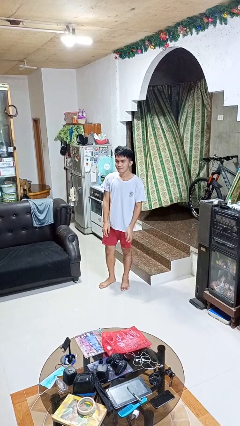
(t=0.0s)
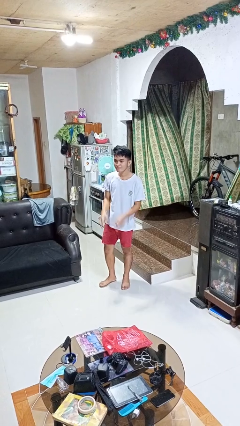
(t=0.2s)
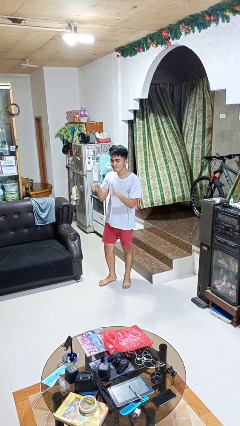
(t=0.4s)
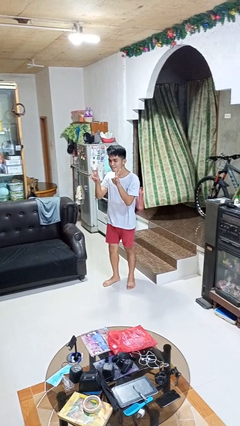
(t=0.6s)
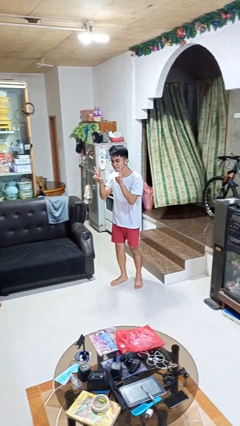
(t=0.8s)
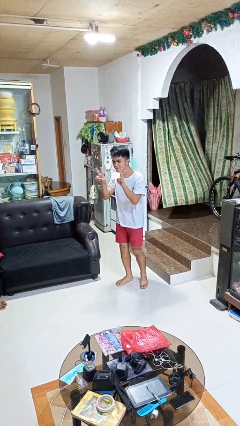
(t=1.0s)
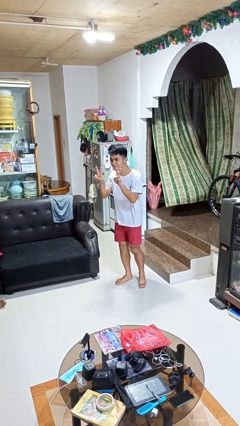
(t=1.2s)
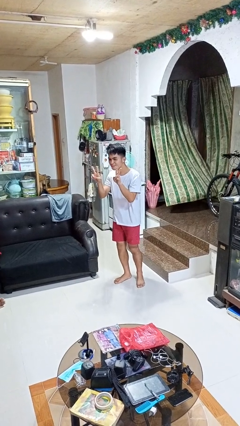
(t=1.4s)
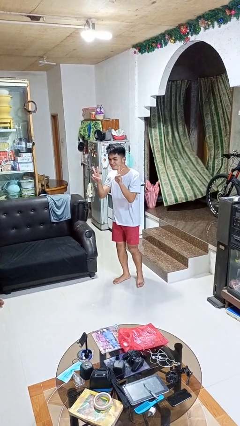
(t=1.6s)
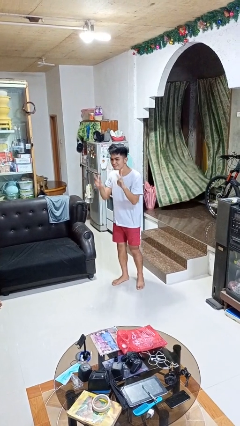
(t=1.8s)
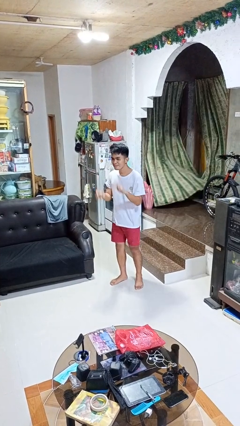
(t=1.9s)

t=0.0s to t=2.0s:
person gestures peace

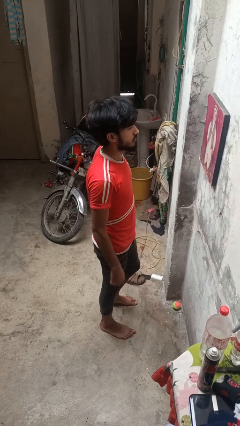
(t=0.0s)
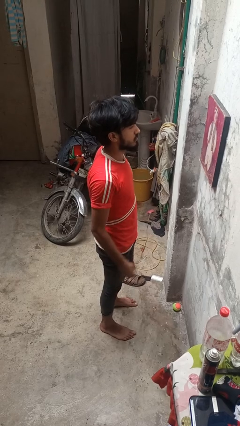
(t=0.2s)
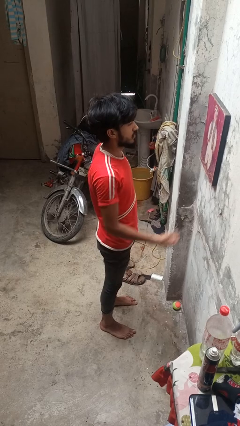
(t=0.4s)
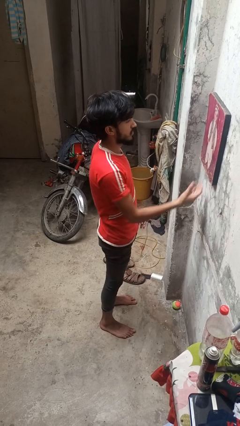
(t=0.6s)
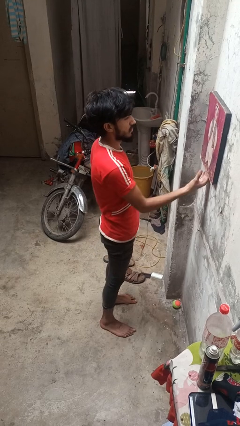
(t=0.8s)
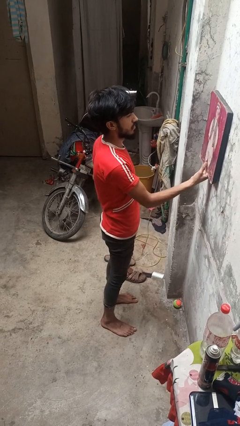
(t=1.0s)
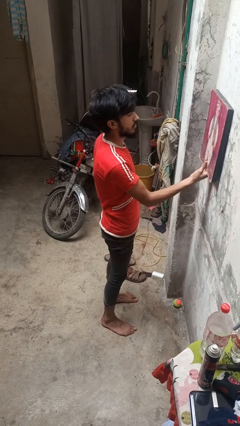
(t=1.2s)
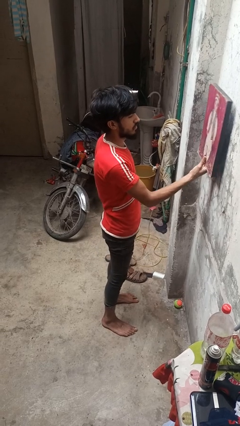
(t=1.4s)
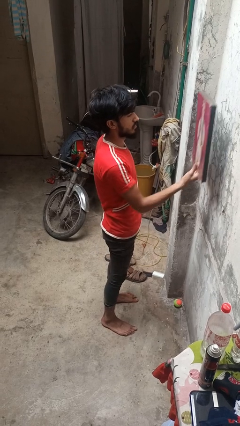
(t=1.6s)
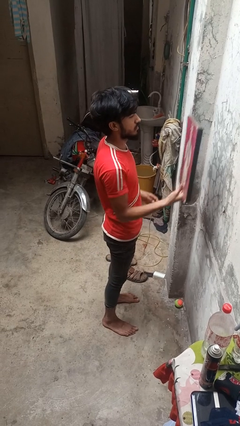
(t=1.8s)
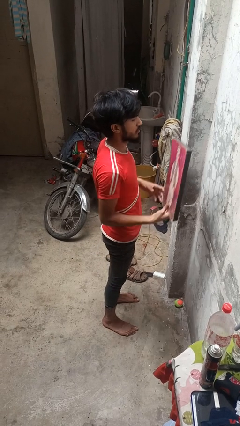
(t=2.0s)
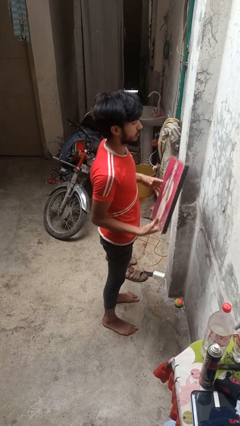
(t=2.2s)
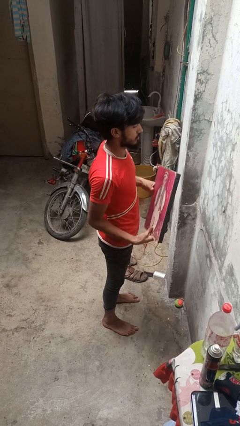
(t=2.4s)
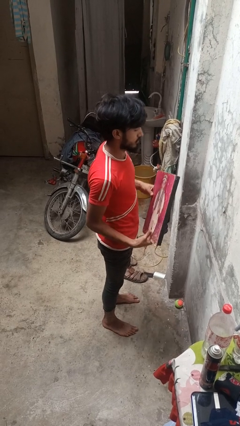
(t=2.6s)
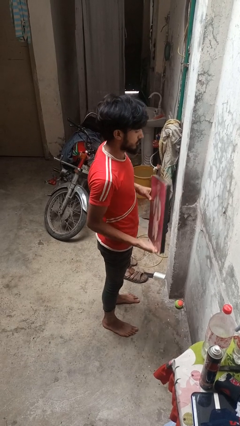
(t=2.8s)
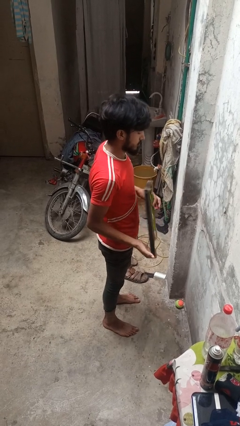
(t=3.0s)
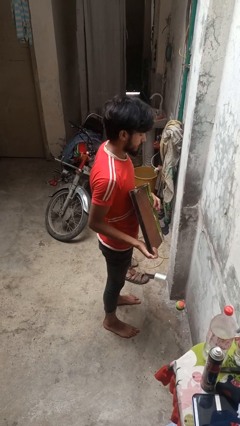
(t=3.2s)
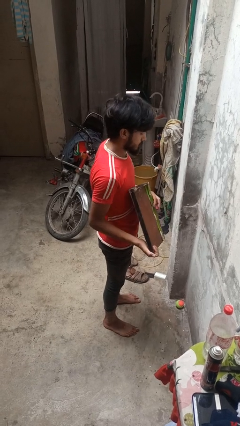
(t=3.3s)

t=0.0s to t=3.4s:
person takes down picture frame

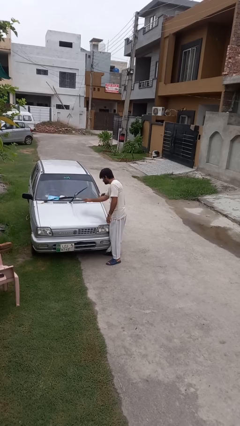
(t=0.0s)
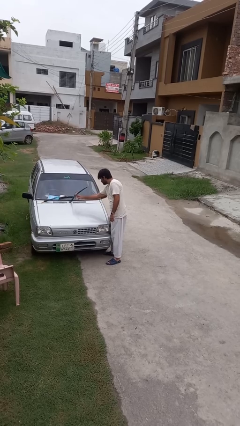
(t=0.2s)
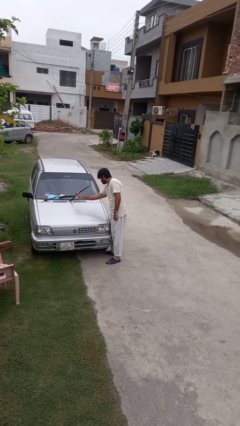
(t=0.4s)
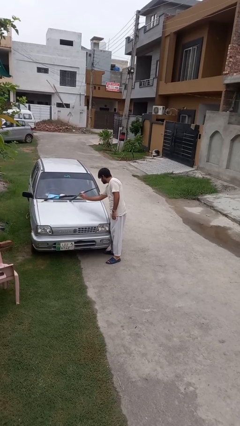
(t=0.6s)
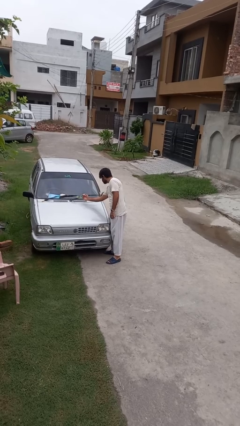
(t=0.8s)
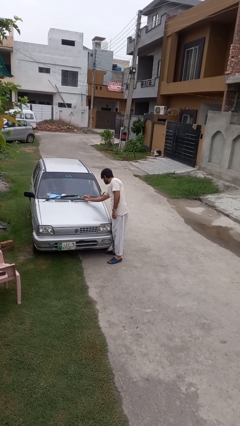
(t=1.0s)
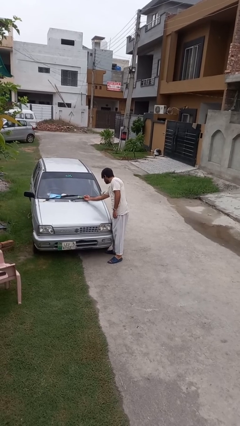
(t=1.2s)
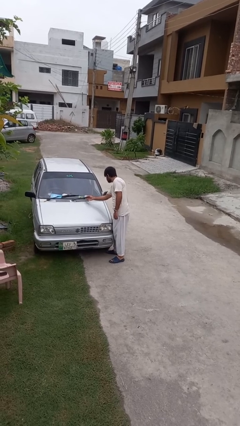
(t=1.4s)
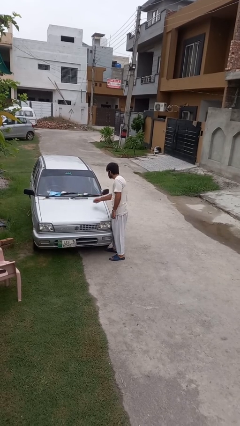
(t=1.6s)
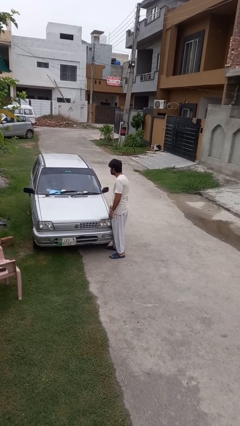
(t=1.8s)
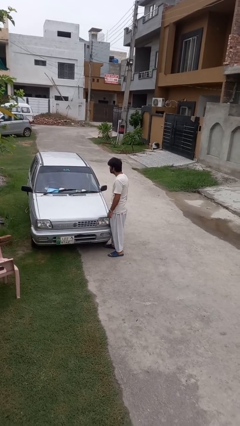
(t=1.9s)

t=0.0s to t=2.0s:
person flips down car wipers

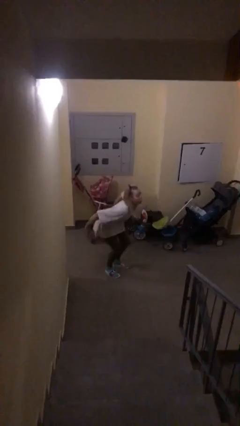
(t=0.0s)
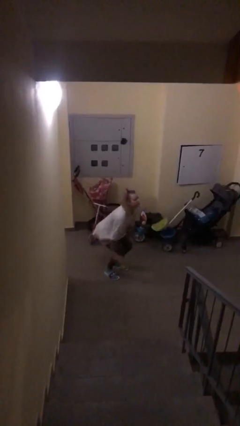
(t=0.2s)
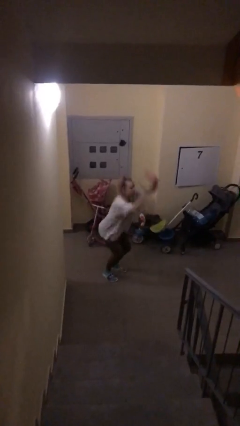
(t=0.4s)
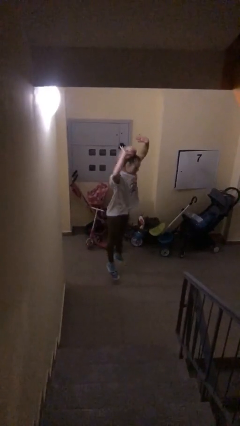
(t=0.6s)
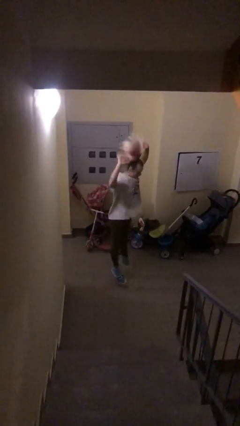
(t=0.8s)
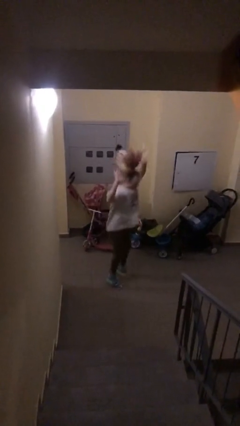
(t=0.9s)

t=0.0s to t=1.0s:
person jumps

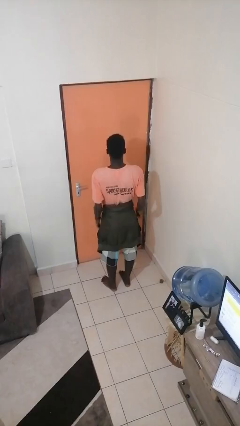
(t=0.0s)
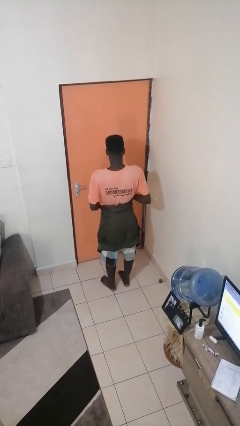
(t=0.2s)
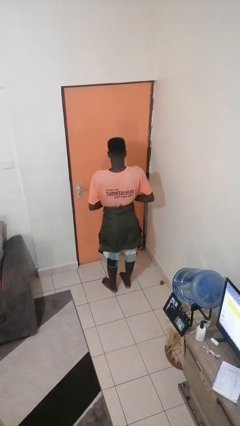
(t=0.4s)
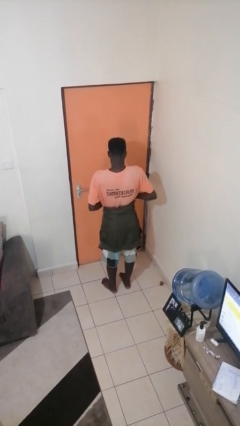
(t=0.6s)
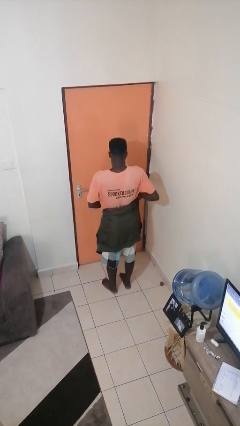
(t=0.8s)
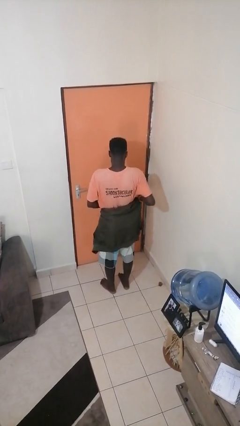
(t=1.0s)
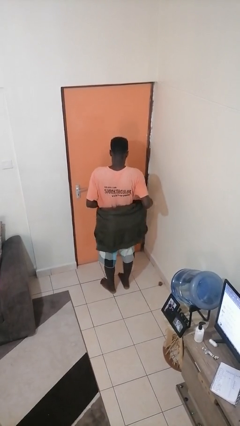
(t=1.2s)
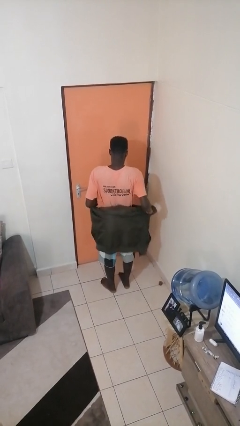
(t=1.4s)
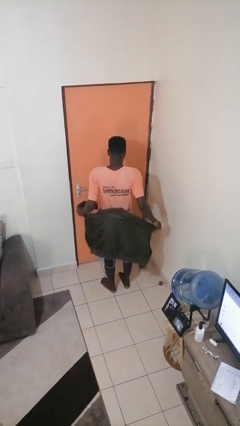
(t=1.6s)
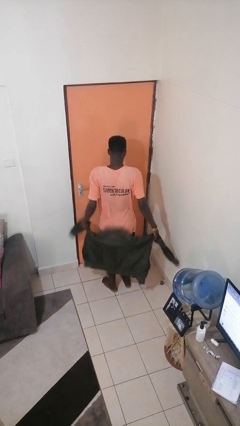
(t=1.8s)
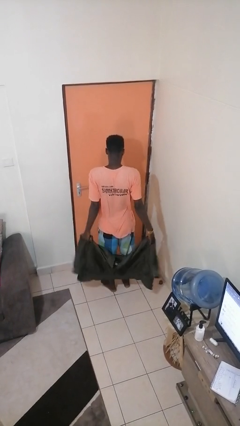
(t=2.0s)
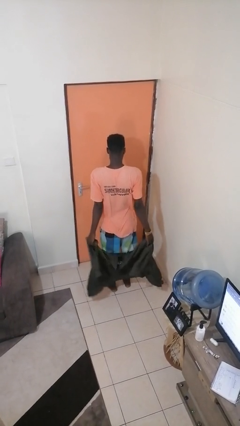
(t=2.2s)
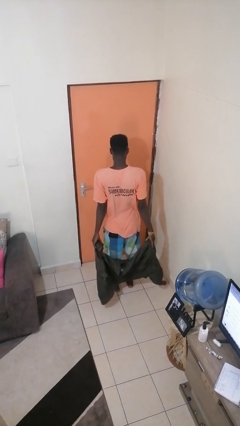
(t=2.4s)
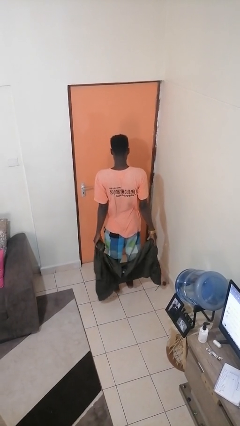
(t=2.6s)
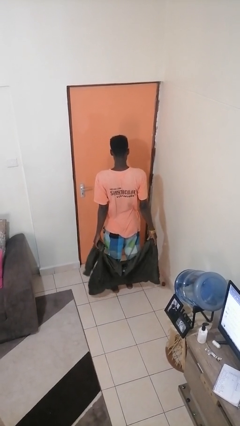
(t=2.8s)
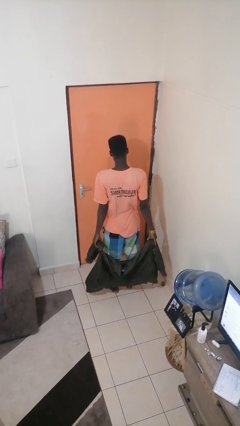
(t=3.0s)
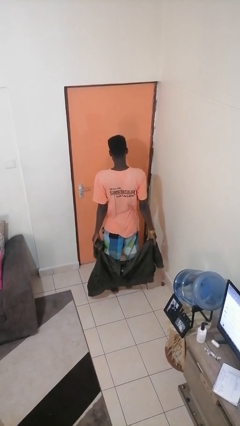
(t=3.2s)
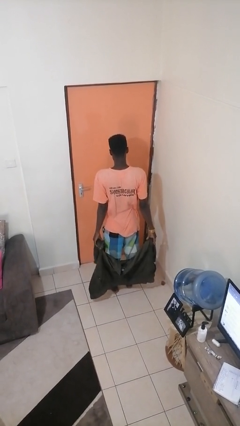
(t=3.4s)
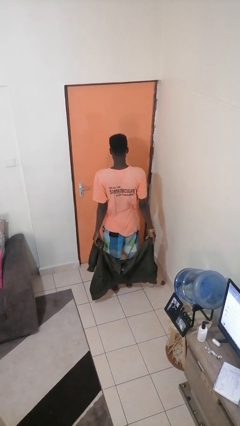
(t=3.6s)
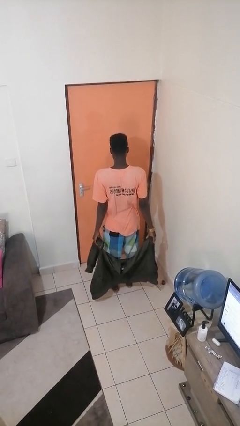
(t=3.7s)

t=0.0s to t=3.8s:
person unties jacket around waist

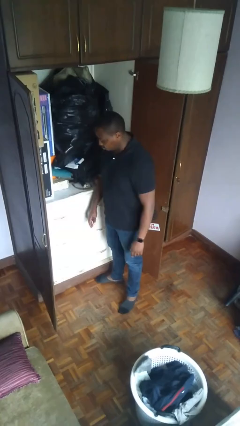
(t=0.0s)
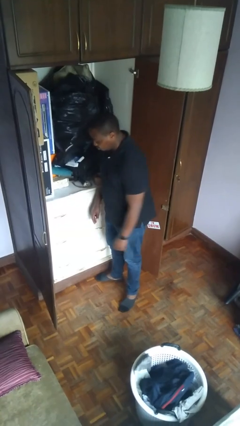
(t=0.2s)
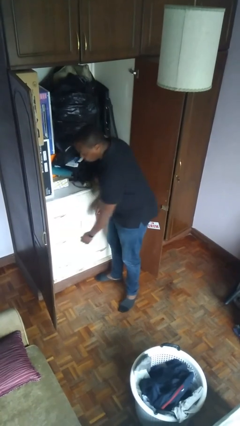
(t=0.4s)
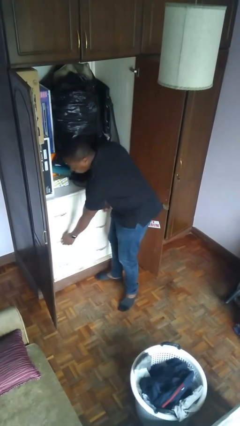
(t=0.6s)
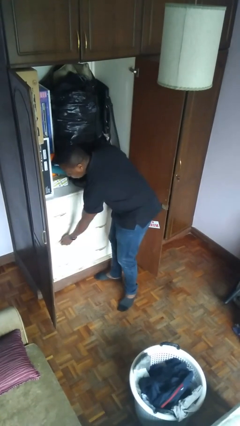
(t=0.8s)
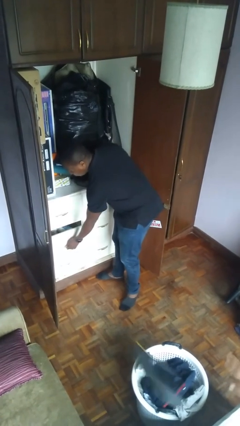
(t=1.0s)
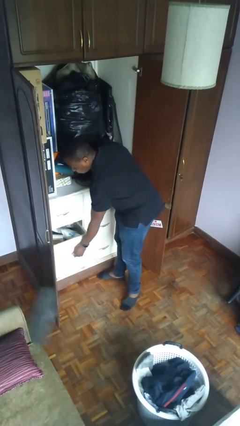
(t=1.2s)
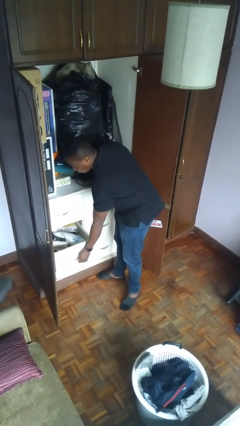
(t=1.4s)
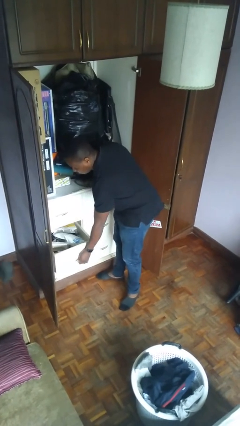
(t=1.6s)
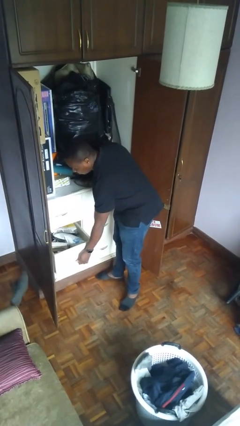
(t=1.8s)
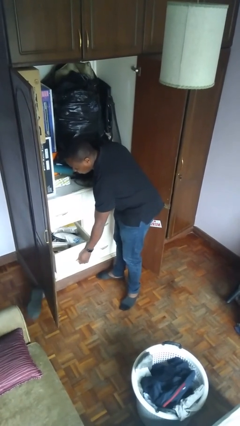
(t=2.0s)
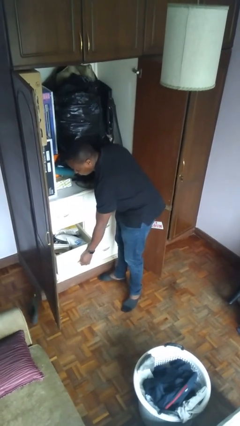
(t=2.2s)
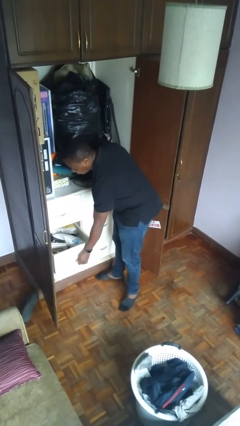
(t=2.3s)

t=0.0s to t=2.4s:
person opens dresser drawer

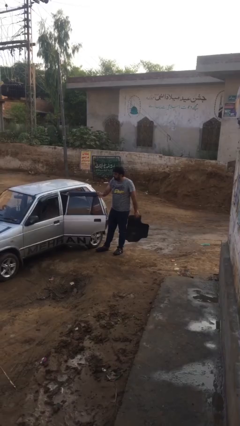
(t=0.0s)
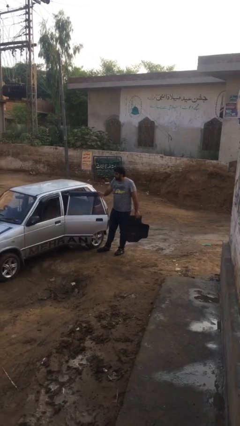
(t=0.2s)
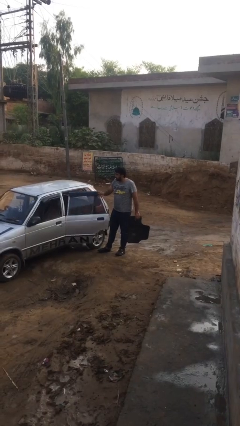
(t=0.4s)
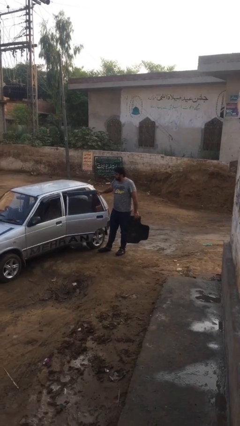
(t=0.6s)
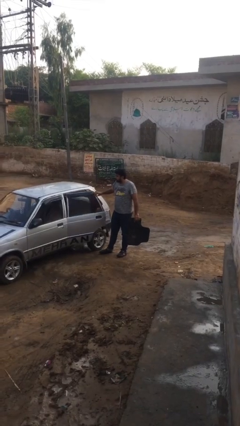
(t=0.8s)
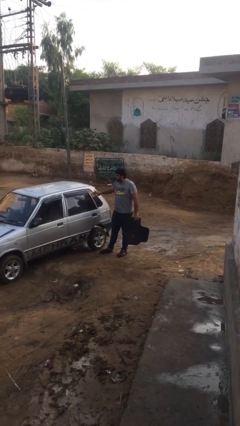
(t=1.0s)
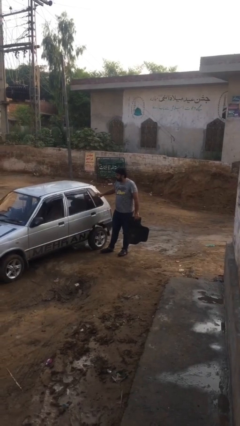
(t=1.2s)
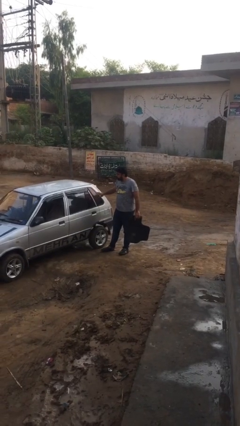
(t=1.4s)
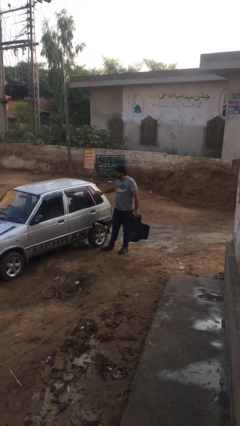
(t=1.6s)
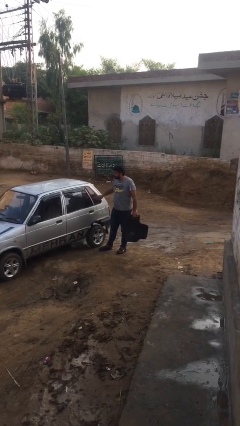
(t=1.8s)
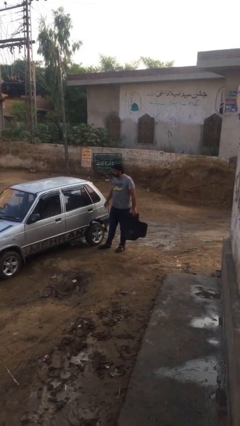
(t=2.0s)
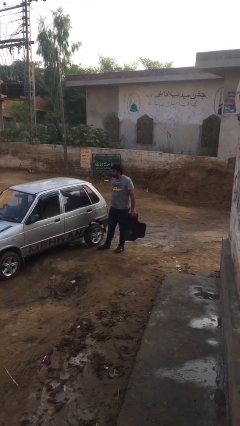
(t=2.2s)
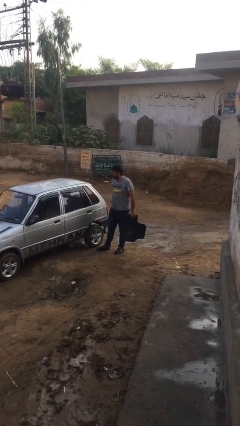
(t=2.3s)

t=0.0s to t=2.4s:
person closes car door
